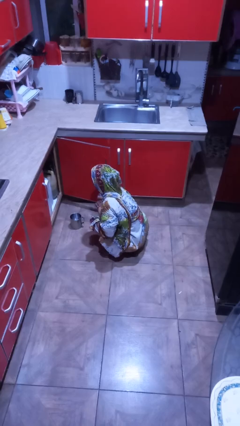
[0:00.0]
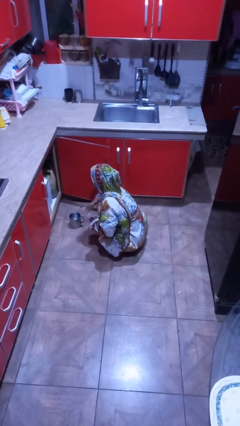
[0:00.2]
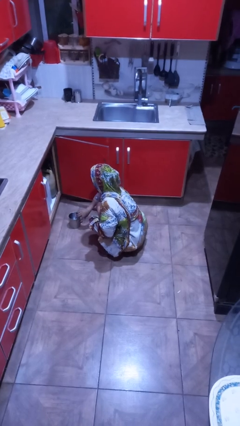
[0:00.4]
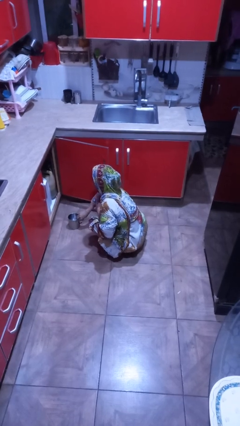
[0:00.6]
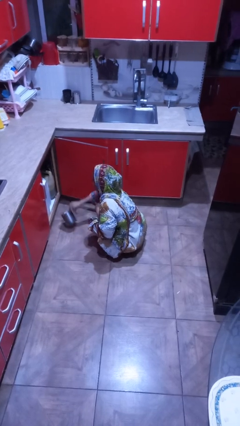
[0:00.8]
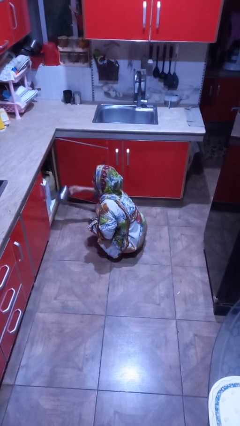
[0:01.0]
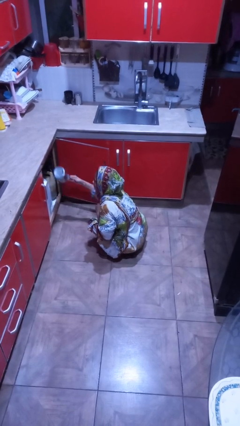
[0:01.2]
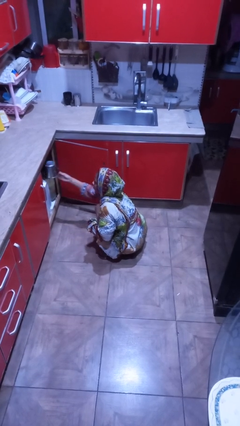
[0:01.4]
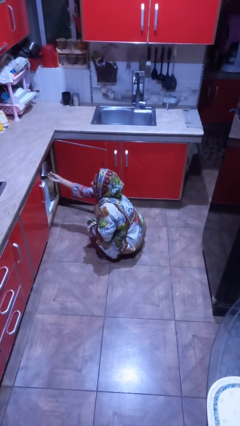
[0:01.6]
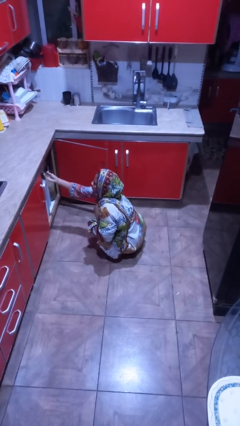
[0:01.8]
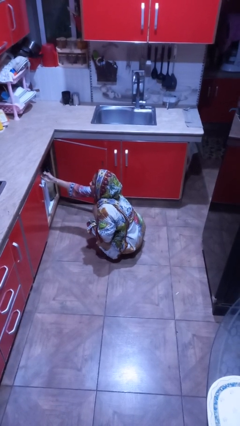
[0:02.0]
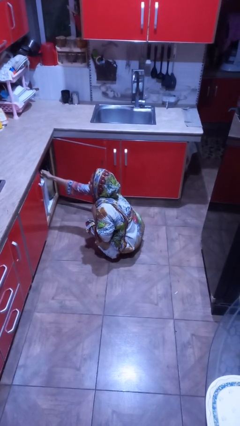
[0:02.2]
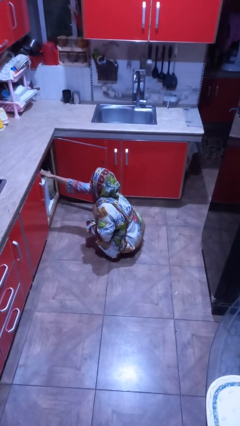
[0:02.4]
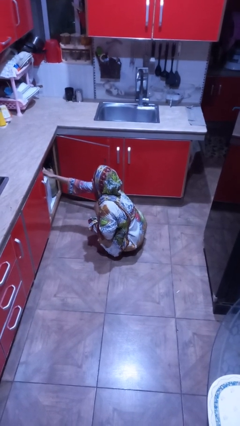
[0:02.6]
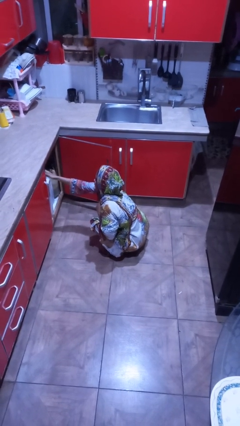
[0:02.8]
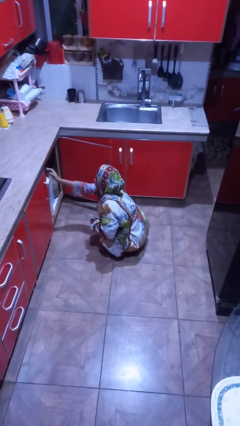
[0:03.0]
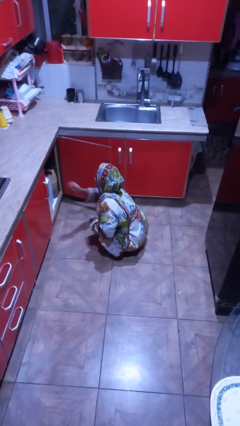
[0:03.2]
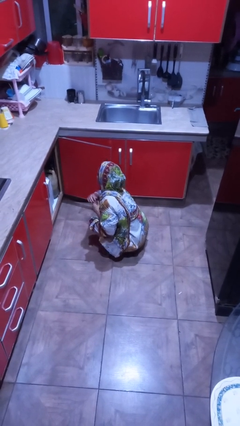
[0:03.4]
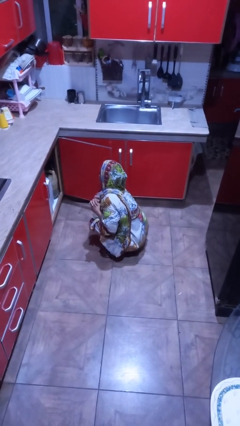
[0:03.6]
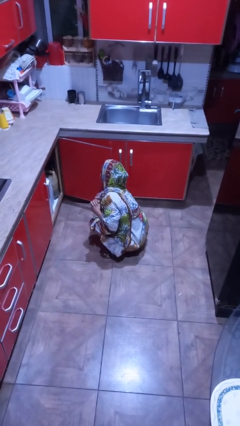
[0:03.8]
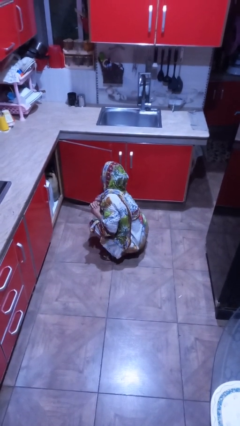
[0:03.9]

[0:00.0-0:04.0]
person puts object in cabinet

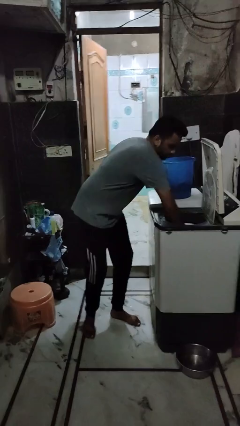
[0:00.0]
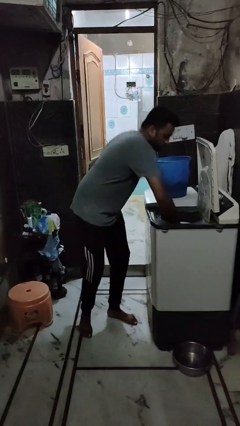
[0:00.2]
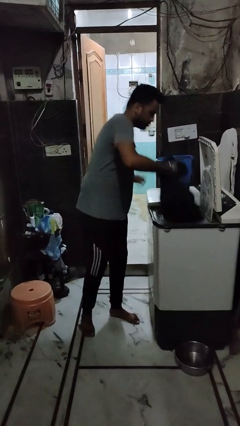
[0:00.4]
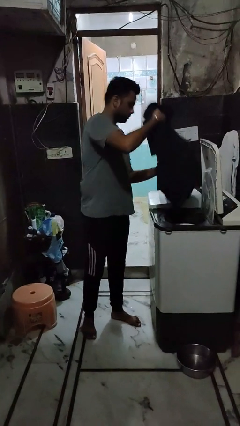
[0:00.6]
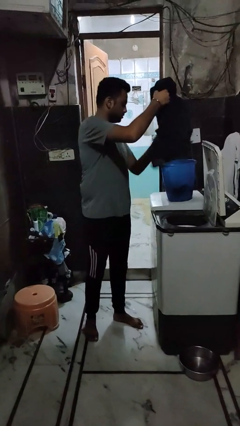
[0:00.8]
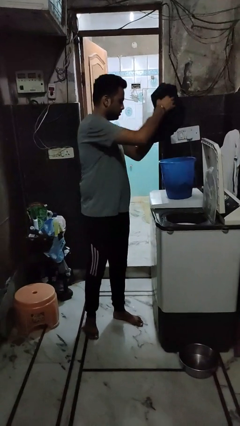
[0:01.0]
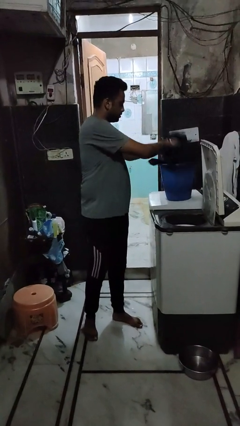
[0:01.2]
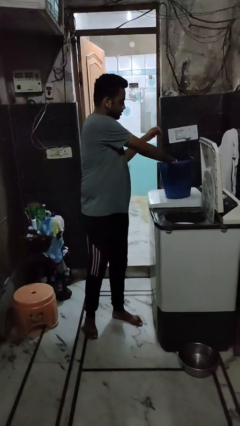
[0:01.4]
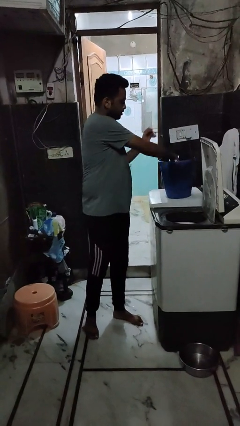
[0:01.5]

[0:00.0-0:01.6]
person unloads dryer

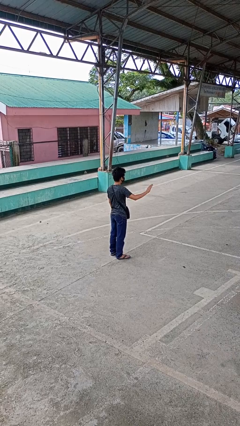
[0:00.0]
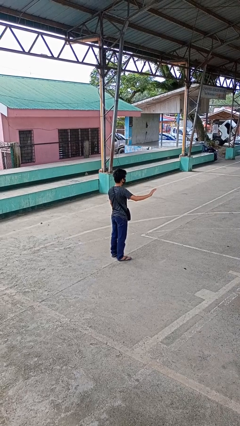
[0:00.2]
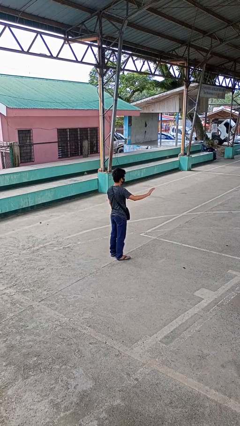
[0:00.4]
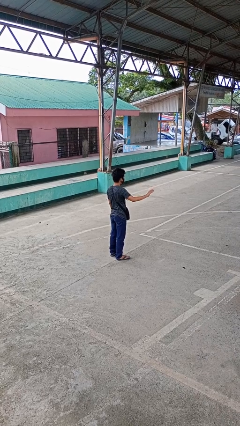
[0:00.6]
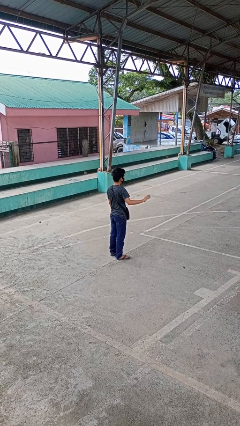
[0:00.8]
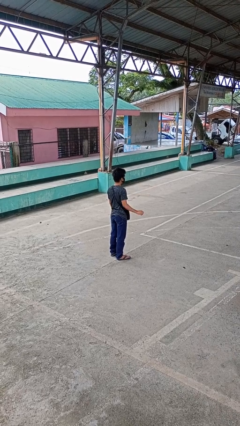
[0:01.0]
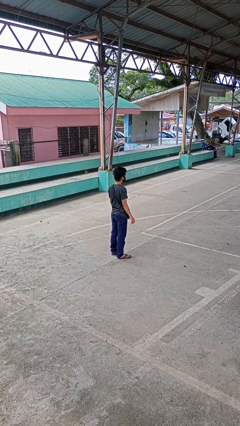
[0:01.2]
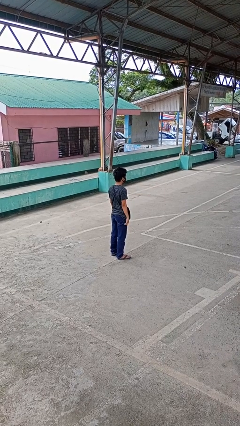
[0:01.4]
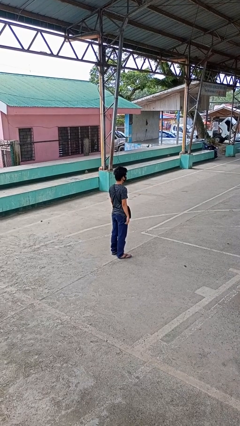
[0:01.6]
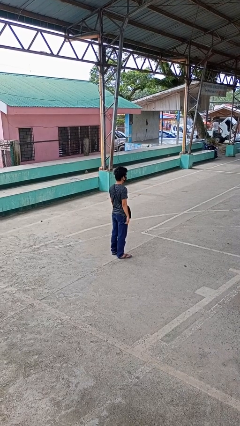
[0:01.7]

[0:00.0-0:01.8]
person gestures swipe right

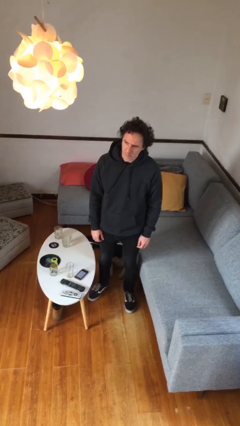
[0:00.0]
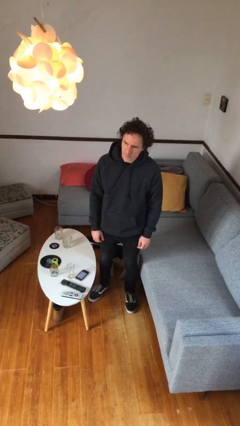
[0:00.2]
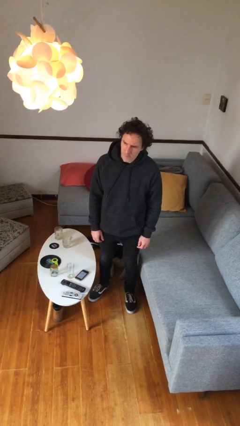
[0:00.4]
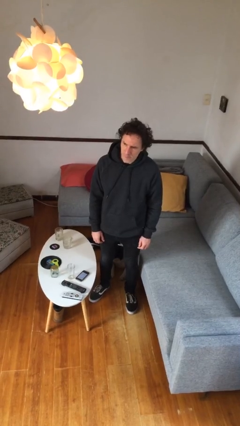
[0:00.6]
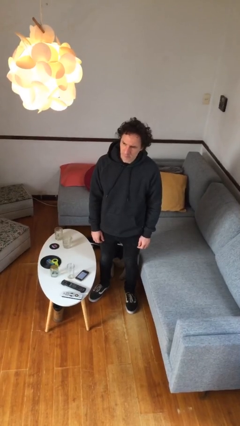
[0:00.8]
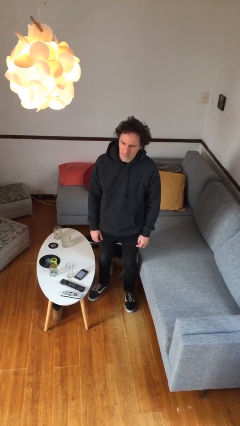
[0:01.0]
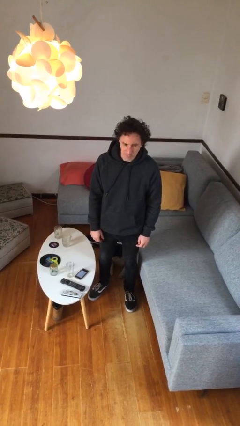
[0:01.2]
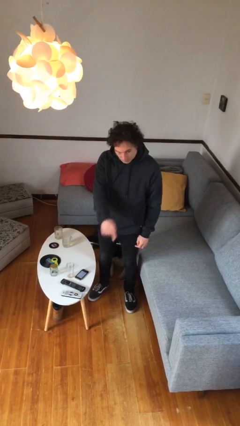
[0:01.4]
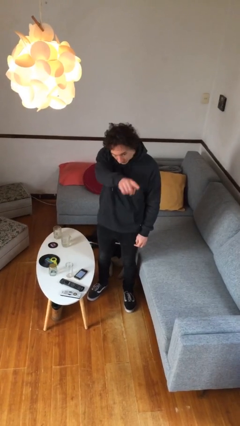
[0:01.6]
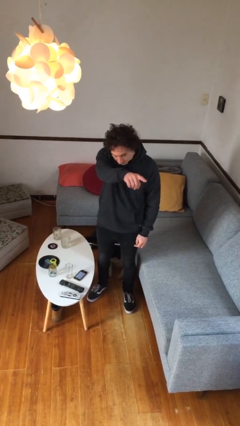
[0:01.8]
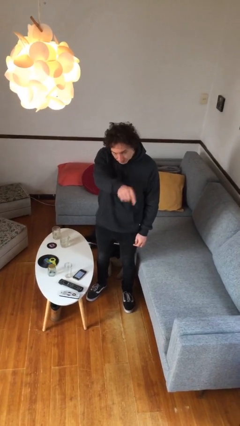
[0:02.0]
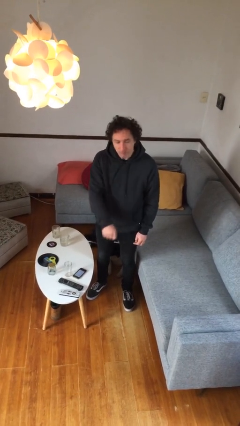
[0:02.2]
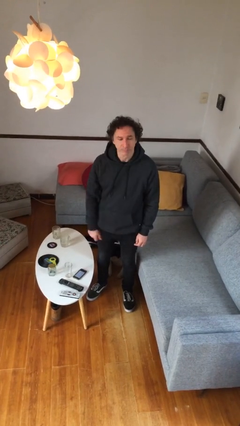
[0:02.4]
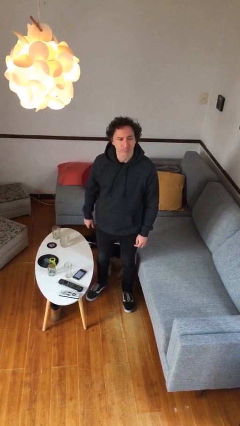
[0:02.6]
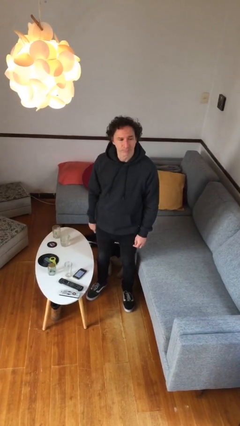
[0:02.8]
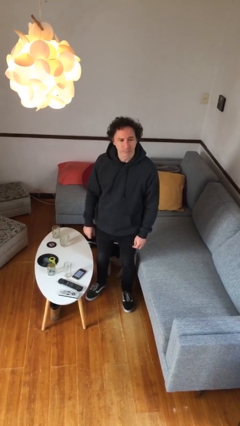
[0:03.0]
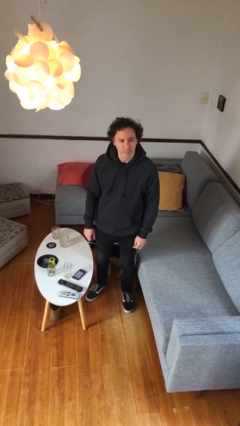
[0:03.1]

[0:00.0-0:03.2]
person points at person

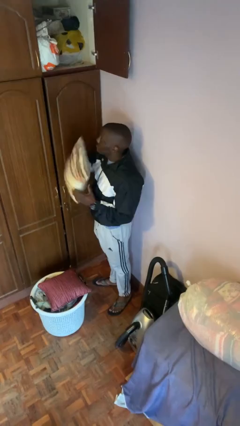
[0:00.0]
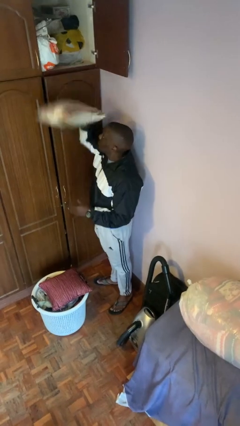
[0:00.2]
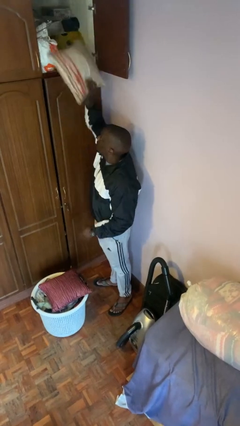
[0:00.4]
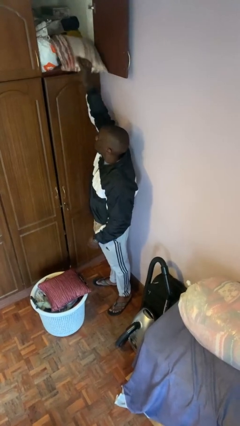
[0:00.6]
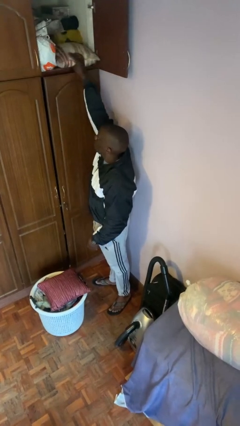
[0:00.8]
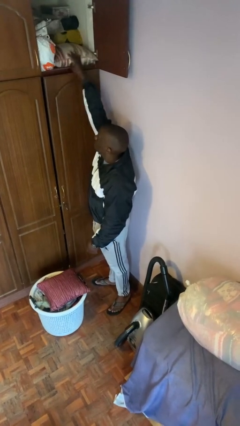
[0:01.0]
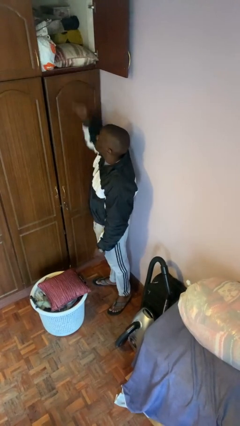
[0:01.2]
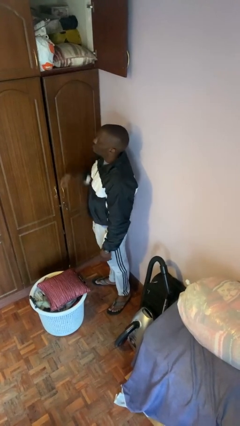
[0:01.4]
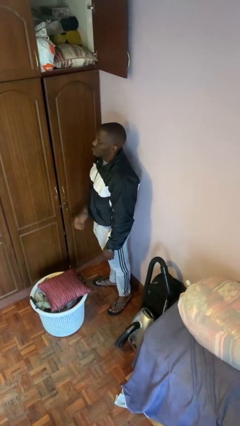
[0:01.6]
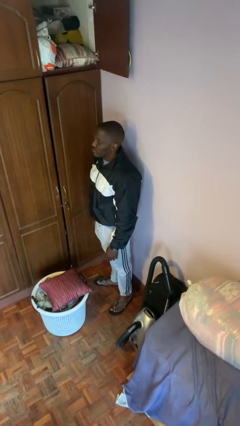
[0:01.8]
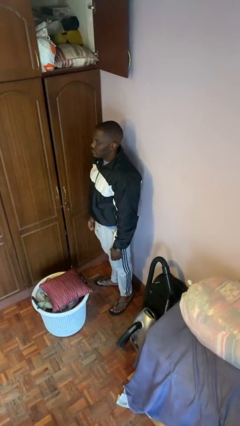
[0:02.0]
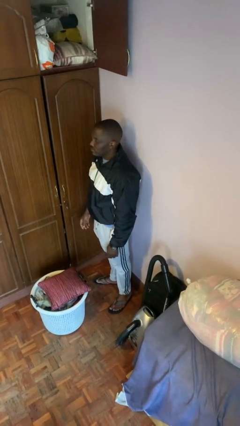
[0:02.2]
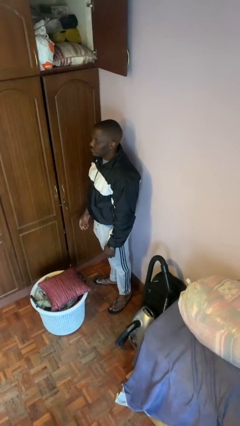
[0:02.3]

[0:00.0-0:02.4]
person puts down object on shelf

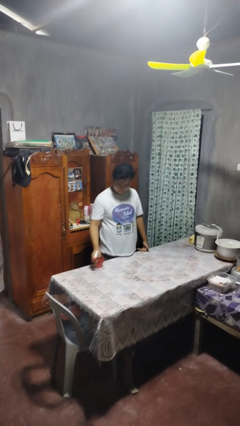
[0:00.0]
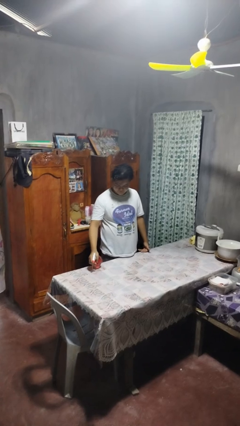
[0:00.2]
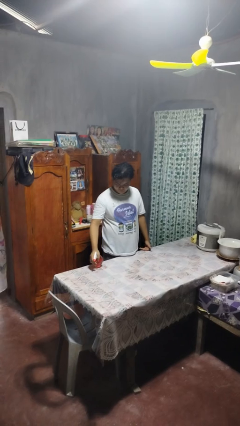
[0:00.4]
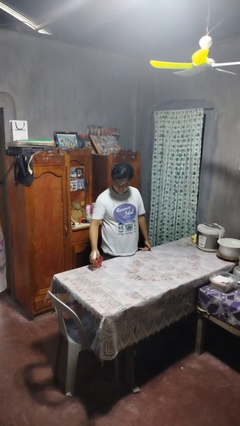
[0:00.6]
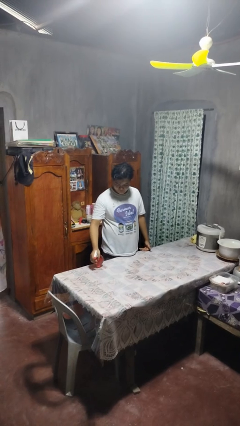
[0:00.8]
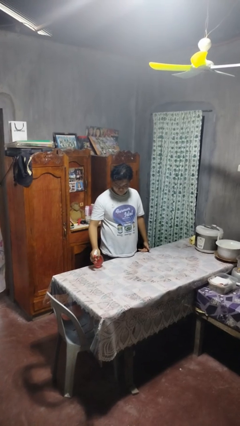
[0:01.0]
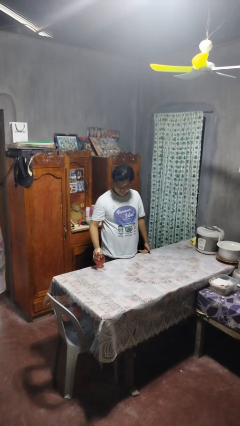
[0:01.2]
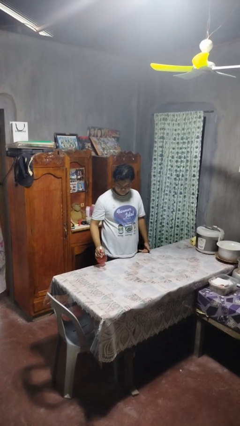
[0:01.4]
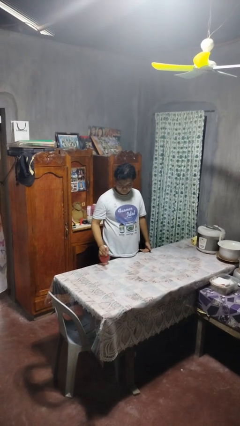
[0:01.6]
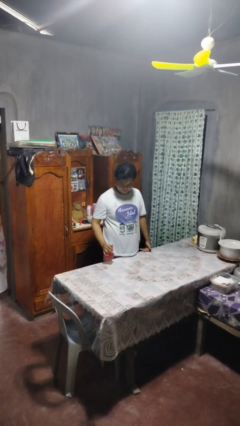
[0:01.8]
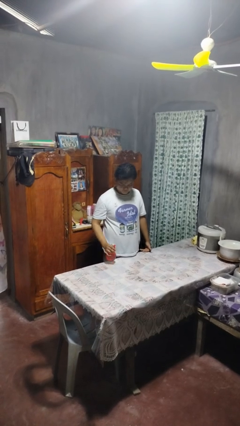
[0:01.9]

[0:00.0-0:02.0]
person sprays from bottle

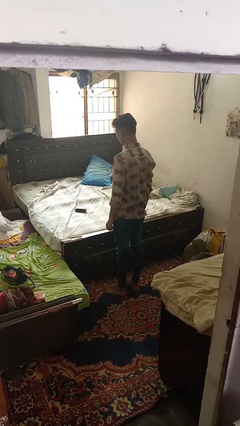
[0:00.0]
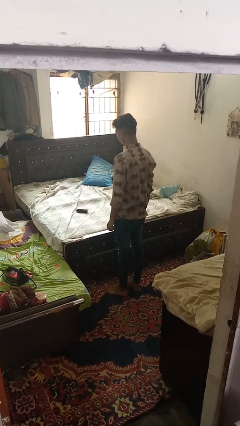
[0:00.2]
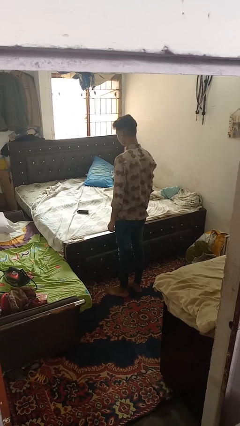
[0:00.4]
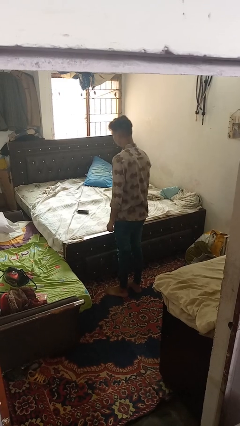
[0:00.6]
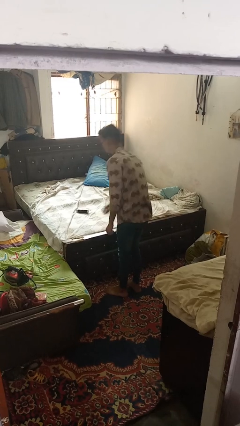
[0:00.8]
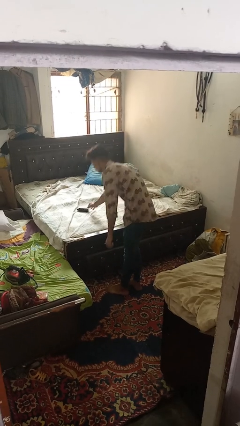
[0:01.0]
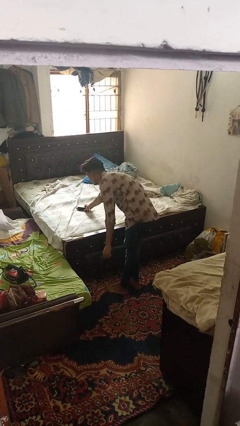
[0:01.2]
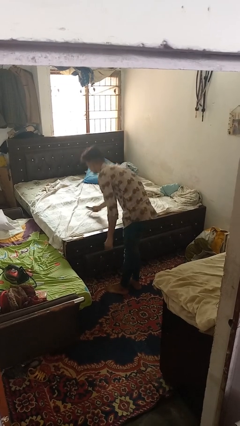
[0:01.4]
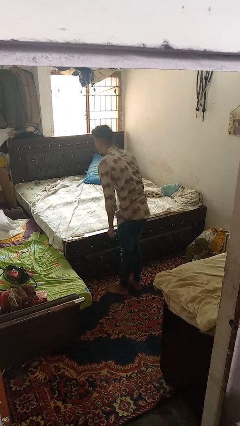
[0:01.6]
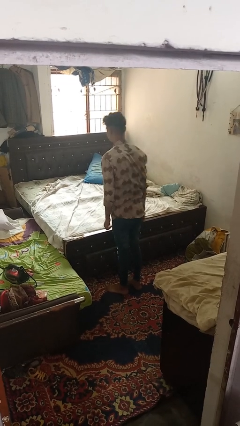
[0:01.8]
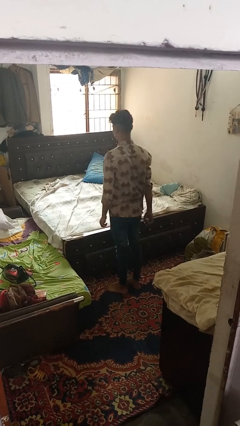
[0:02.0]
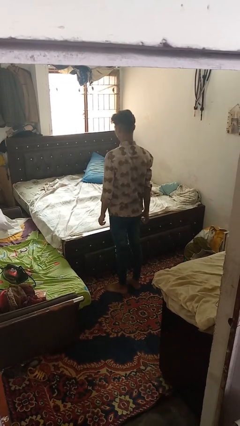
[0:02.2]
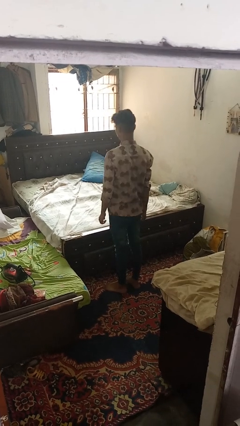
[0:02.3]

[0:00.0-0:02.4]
person picks up object from bed
